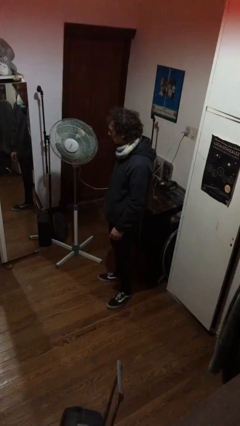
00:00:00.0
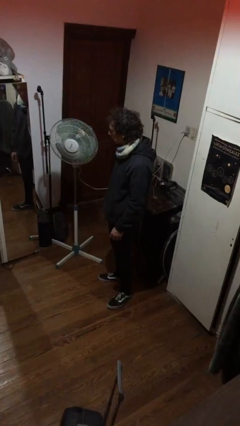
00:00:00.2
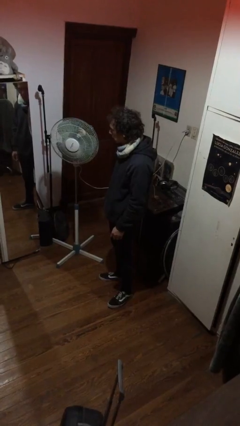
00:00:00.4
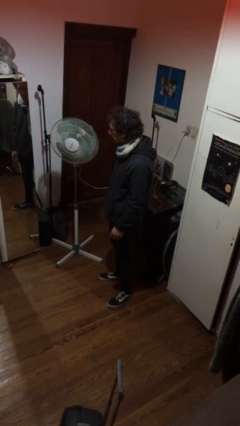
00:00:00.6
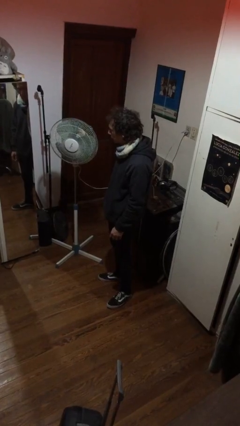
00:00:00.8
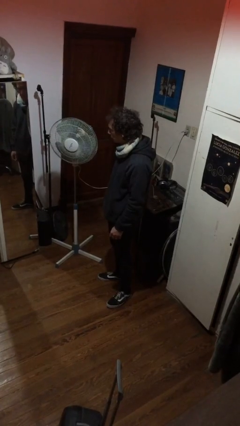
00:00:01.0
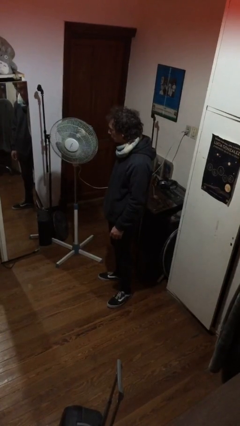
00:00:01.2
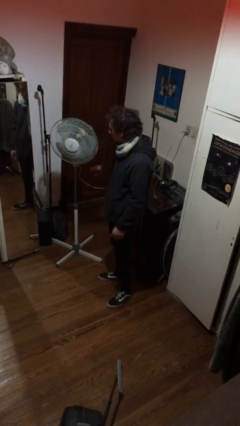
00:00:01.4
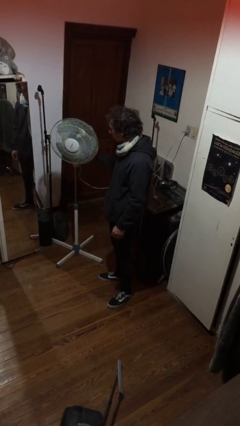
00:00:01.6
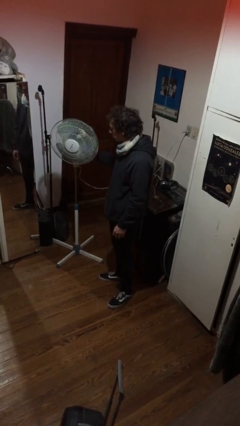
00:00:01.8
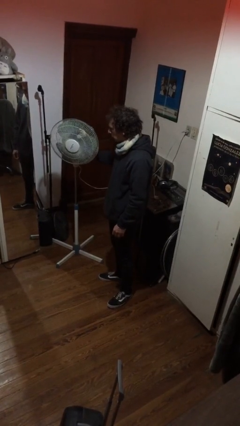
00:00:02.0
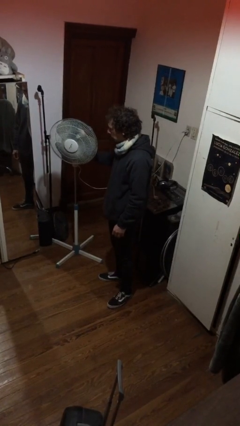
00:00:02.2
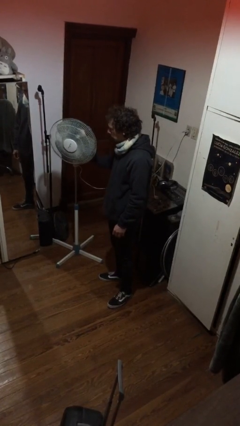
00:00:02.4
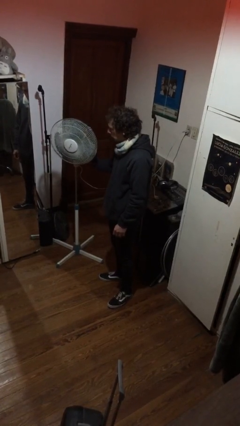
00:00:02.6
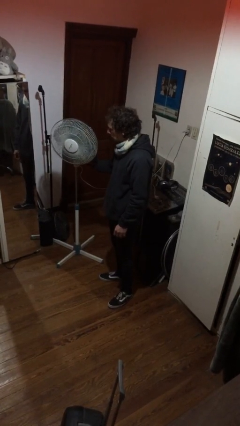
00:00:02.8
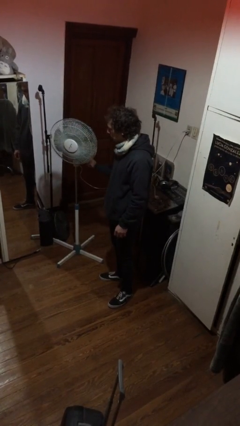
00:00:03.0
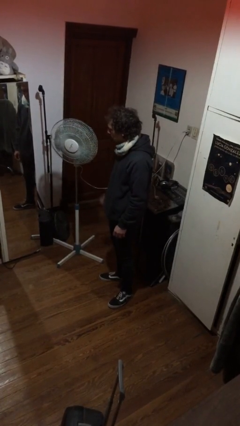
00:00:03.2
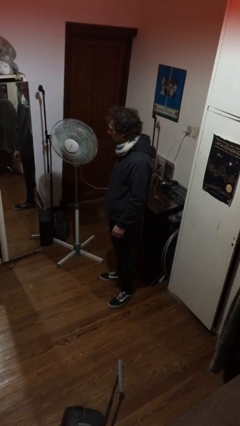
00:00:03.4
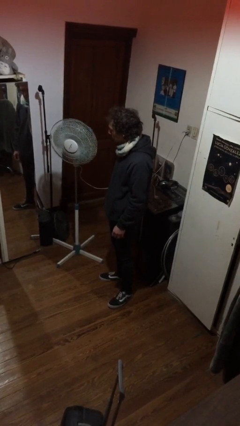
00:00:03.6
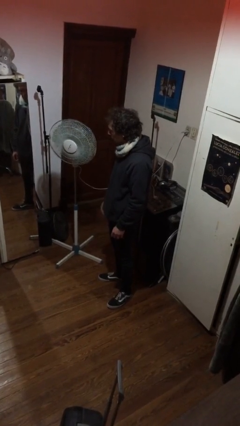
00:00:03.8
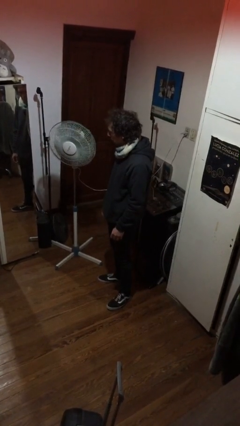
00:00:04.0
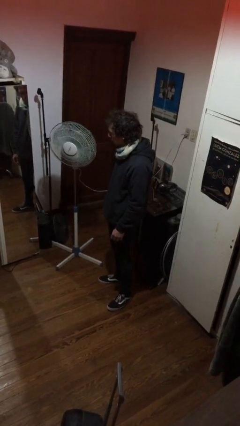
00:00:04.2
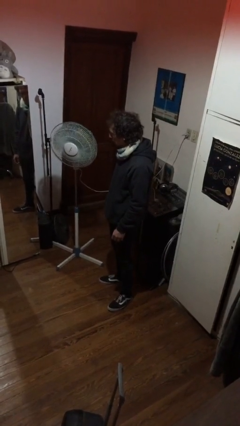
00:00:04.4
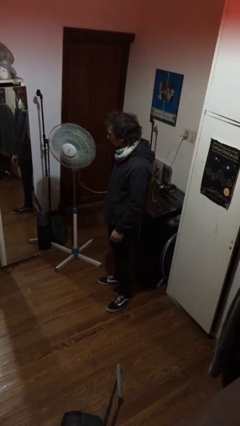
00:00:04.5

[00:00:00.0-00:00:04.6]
person turns on fan

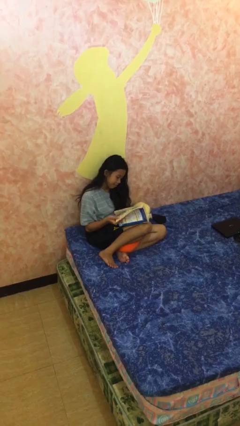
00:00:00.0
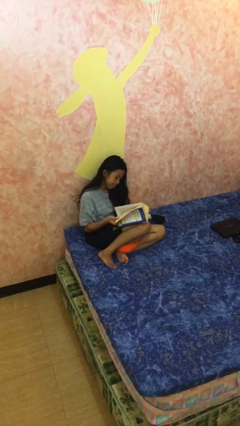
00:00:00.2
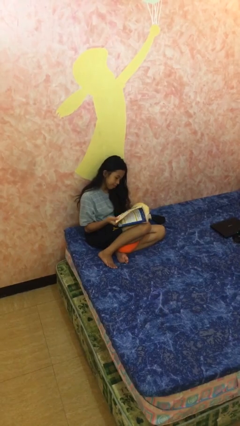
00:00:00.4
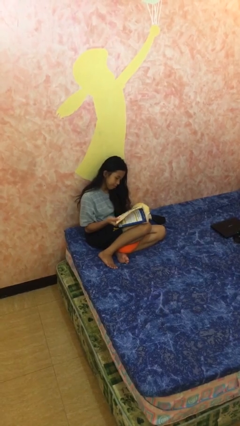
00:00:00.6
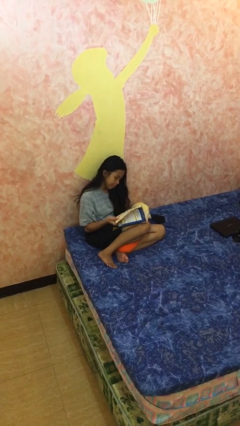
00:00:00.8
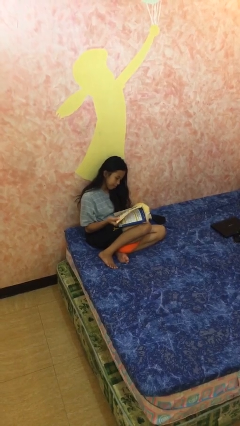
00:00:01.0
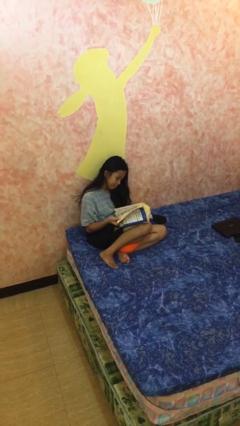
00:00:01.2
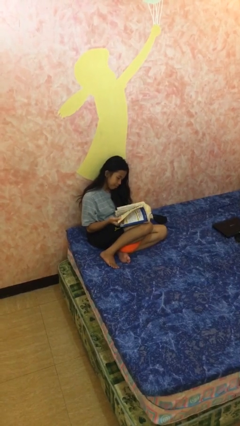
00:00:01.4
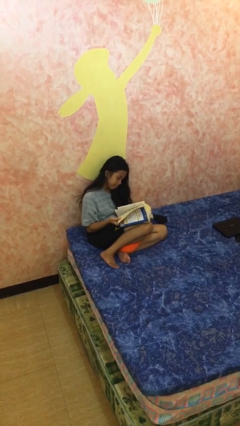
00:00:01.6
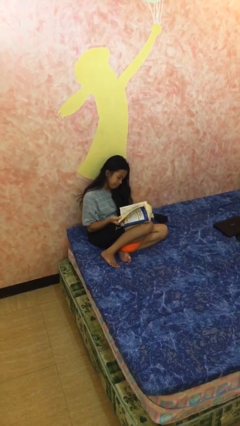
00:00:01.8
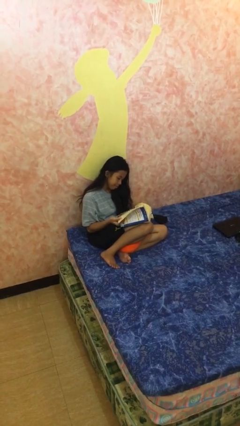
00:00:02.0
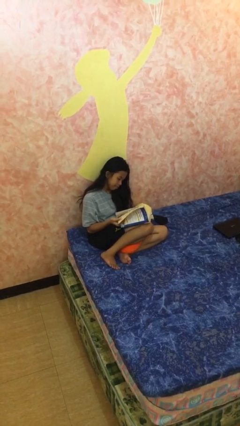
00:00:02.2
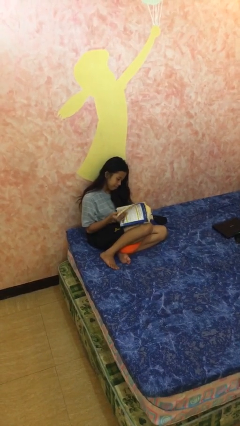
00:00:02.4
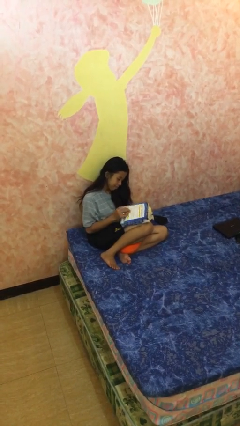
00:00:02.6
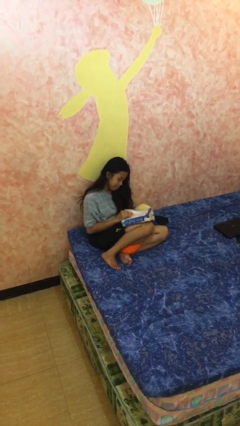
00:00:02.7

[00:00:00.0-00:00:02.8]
person reads document

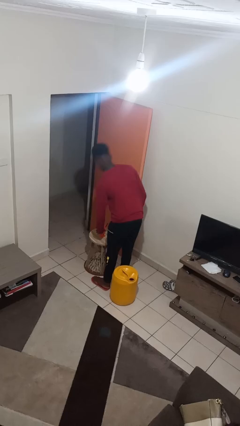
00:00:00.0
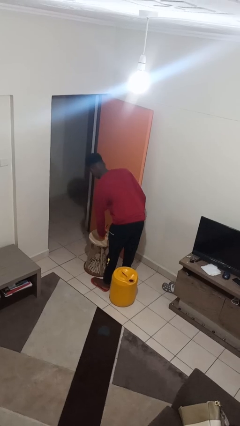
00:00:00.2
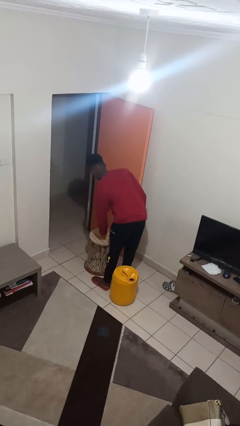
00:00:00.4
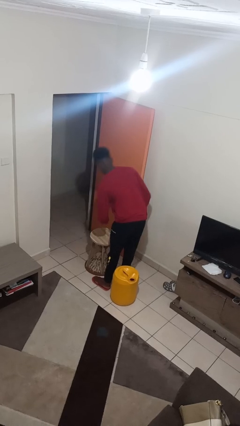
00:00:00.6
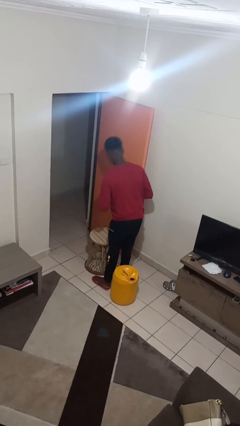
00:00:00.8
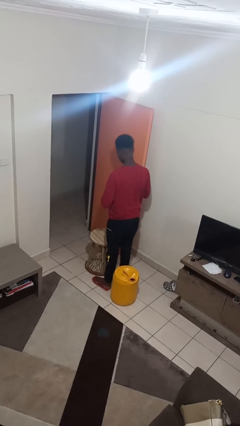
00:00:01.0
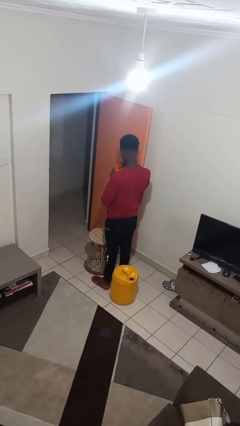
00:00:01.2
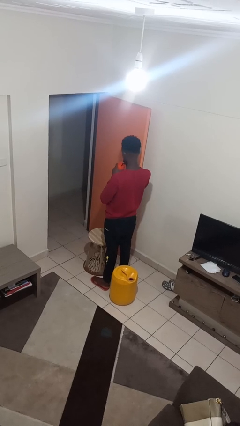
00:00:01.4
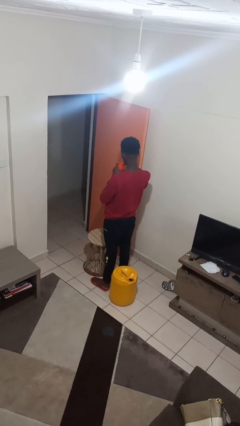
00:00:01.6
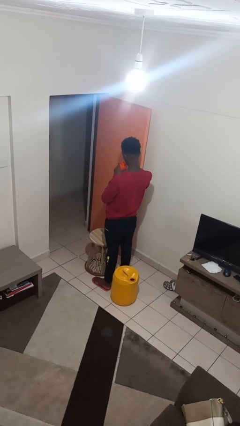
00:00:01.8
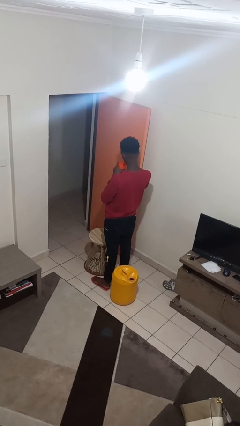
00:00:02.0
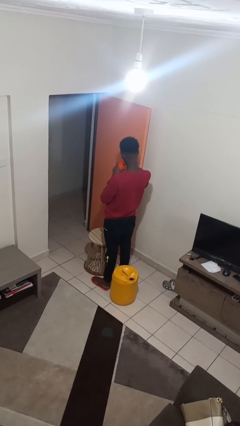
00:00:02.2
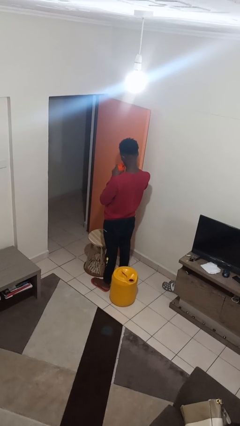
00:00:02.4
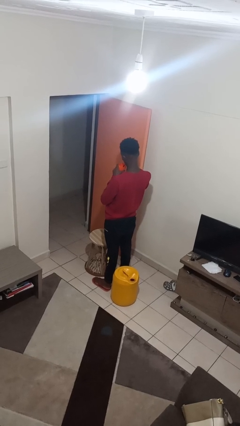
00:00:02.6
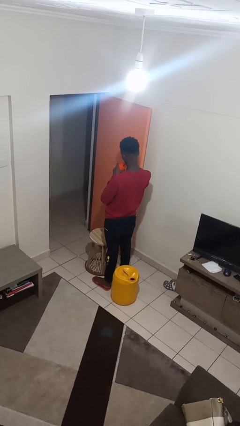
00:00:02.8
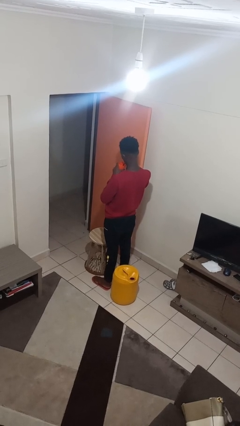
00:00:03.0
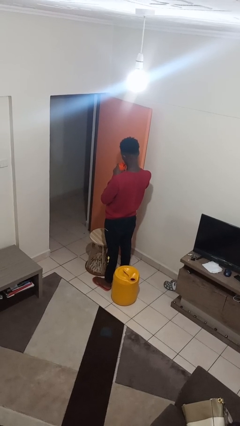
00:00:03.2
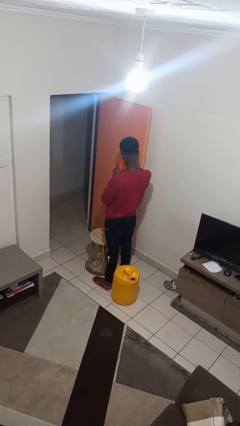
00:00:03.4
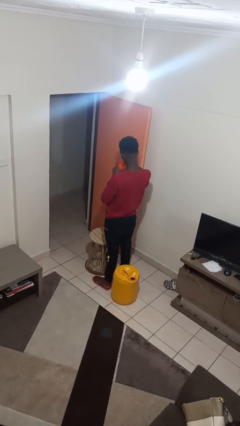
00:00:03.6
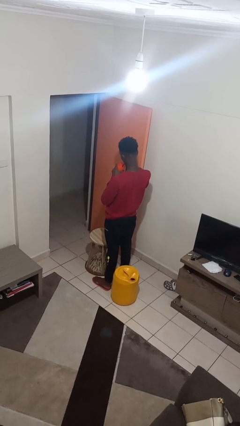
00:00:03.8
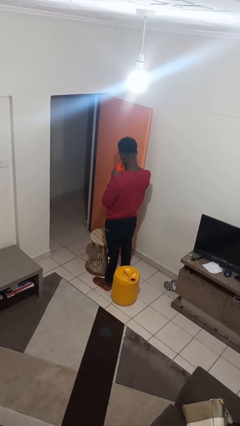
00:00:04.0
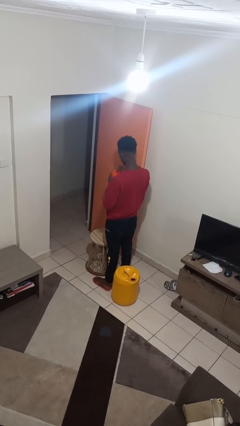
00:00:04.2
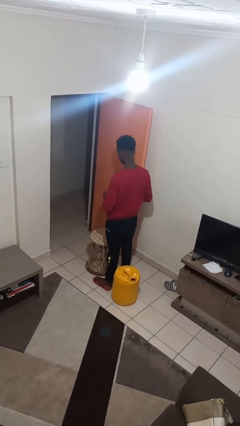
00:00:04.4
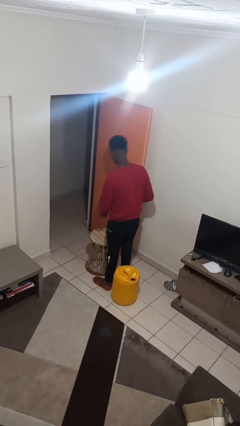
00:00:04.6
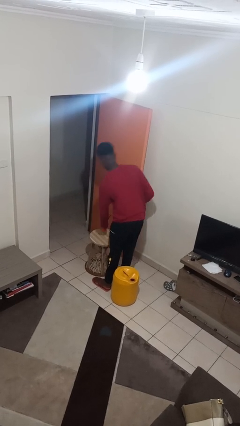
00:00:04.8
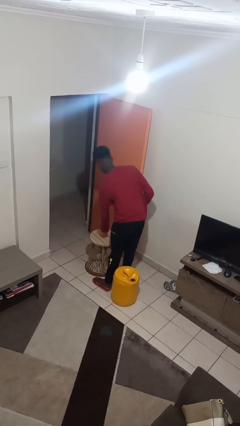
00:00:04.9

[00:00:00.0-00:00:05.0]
person drinks from straw

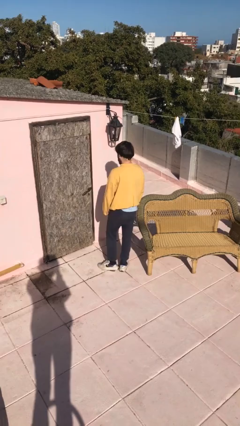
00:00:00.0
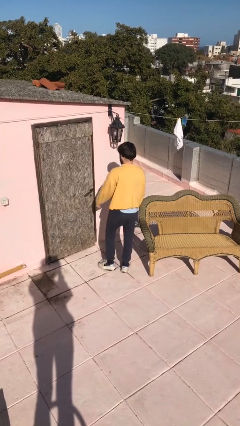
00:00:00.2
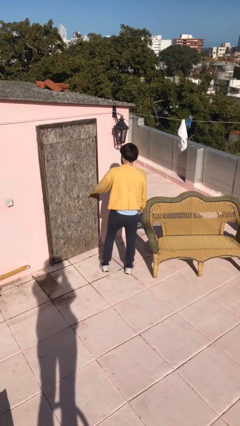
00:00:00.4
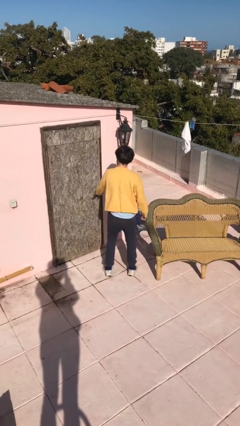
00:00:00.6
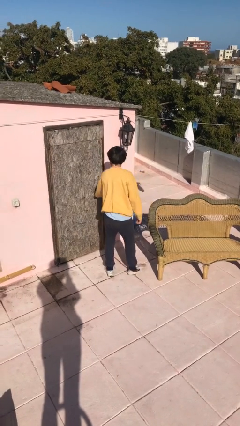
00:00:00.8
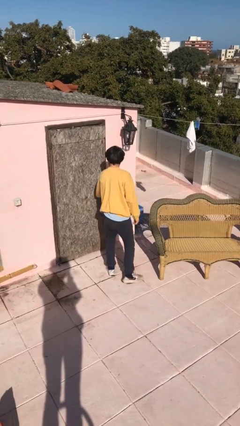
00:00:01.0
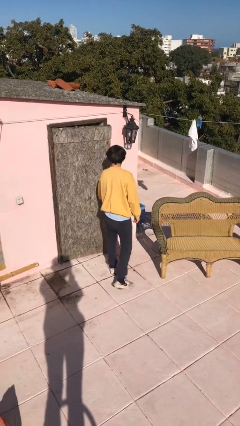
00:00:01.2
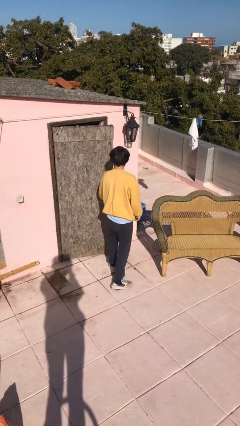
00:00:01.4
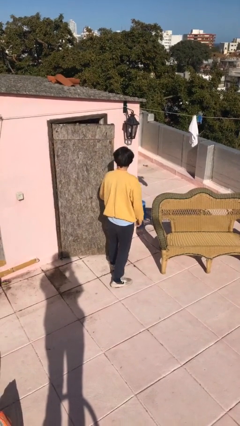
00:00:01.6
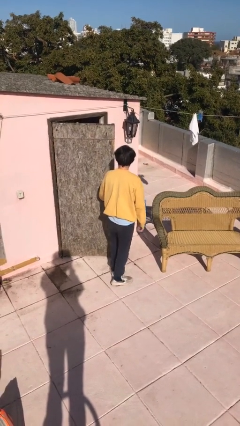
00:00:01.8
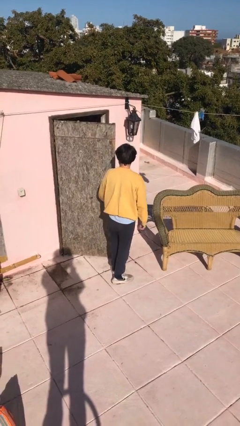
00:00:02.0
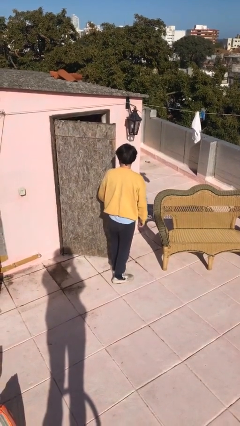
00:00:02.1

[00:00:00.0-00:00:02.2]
person opens facility door

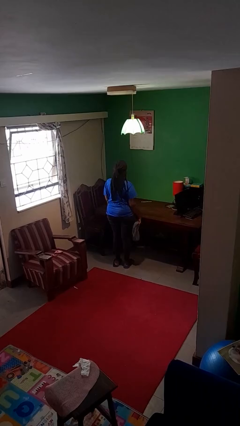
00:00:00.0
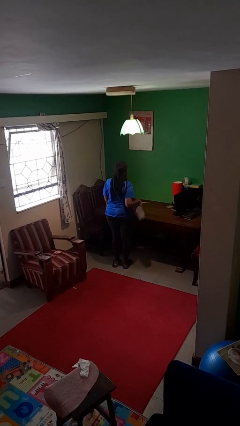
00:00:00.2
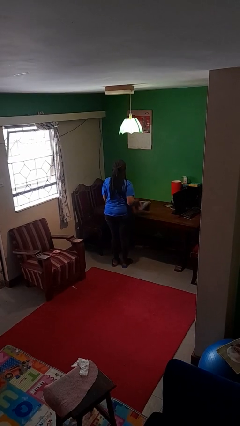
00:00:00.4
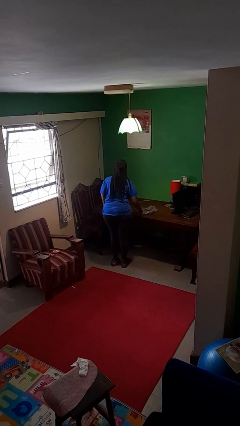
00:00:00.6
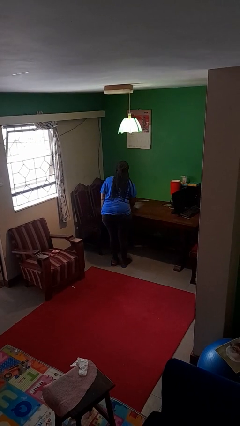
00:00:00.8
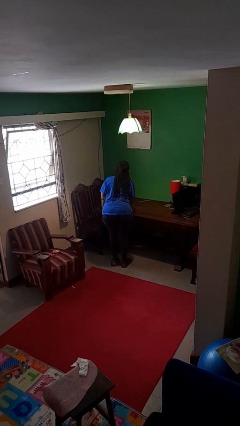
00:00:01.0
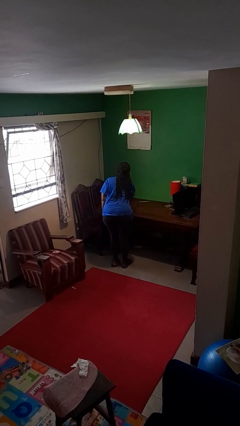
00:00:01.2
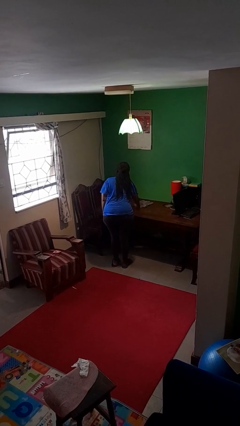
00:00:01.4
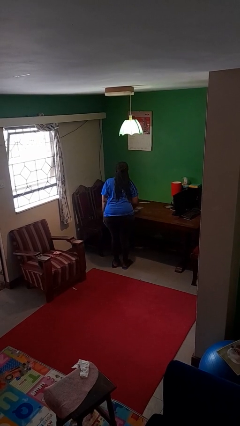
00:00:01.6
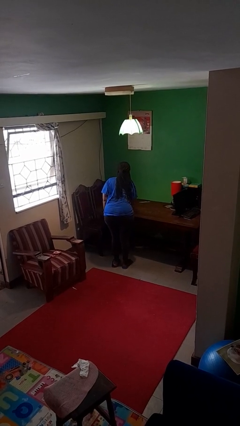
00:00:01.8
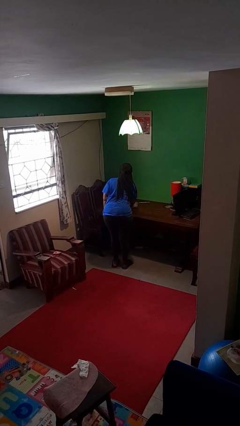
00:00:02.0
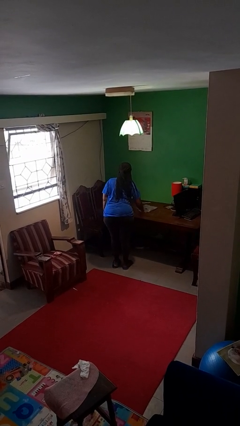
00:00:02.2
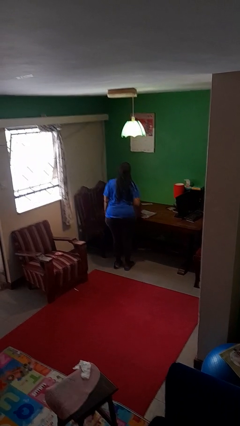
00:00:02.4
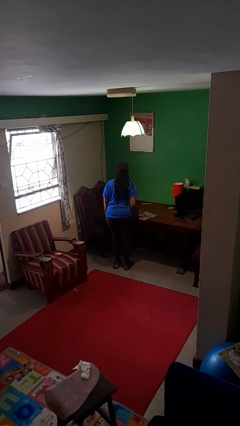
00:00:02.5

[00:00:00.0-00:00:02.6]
person cleans table with rag

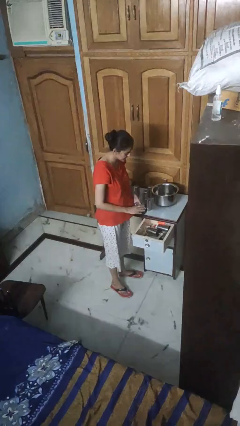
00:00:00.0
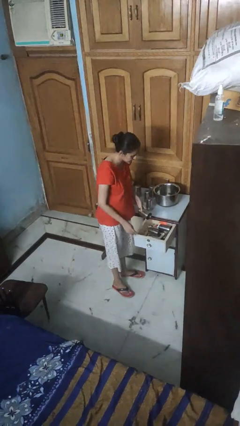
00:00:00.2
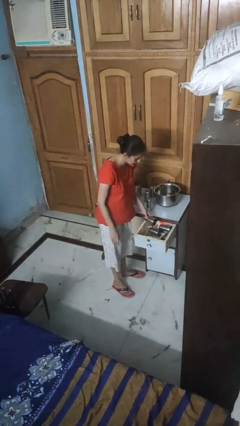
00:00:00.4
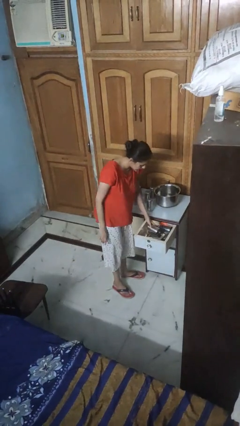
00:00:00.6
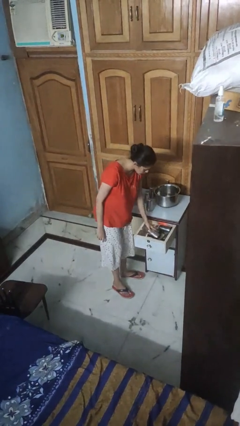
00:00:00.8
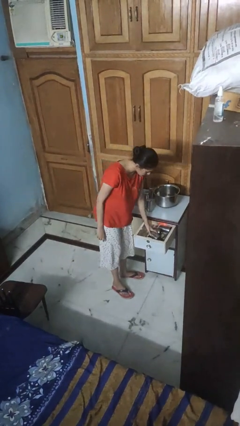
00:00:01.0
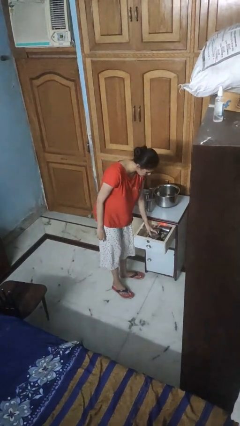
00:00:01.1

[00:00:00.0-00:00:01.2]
person puts object into kitchen drawer
